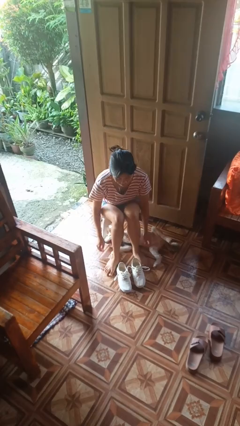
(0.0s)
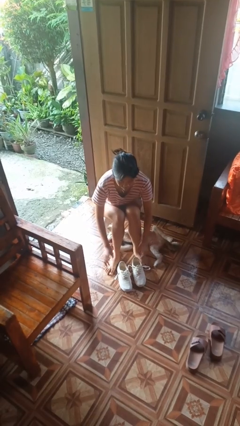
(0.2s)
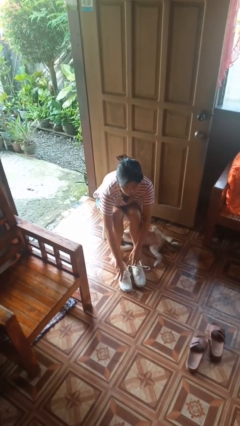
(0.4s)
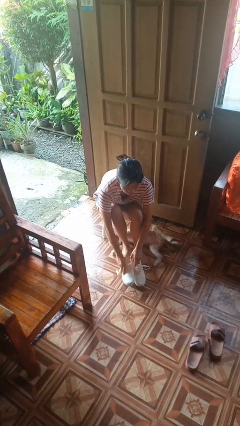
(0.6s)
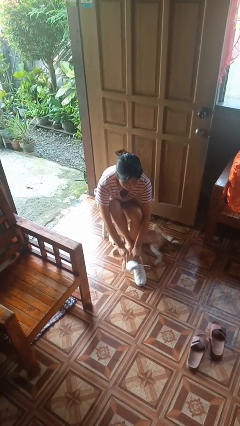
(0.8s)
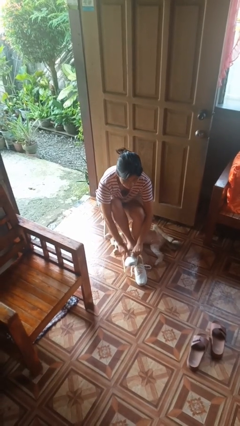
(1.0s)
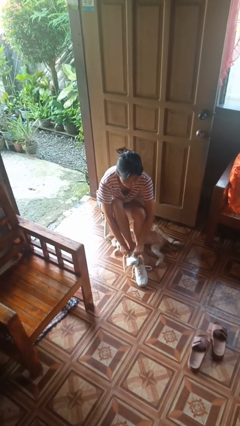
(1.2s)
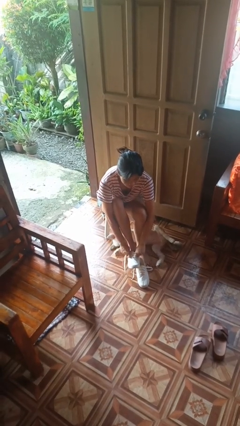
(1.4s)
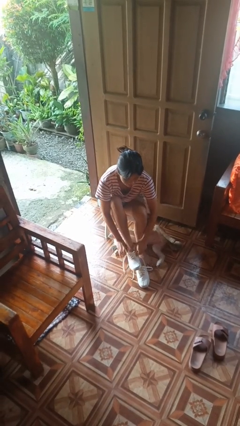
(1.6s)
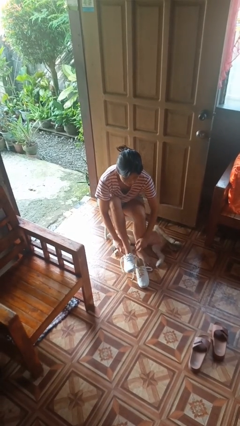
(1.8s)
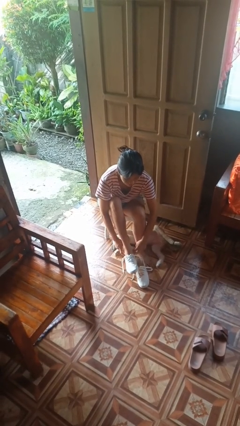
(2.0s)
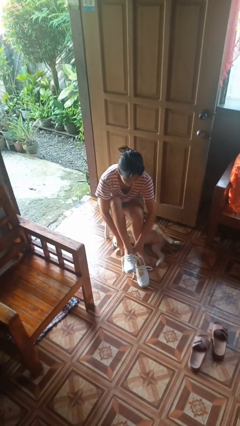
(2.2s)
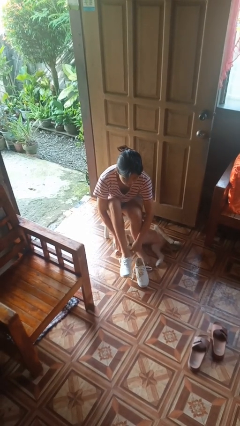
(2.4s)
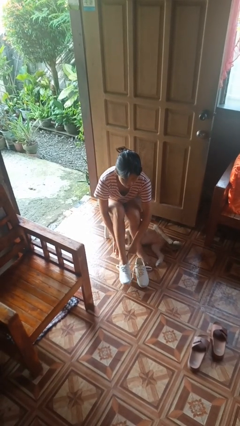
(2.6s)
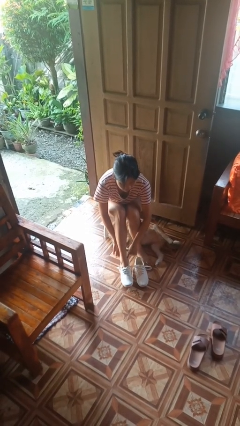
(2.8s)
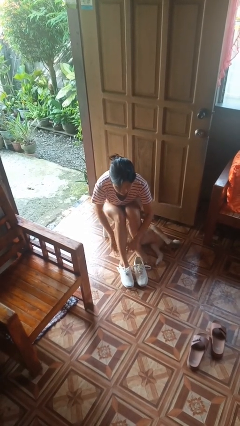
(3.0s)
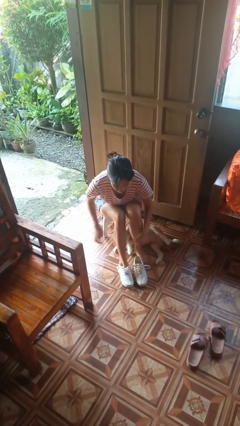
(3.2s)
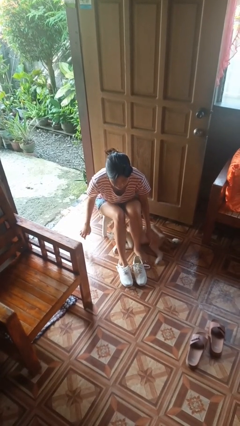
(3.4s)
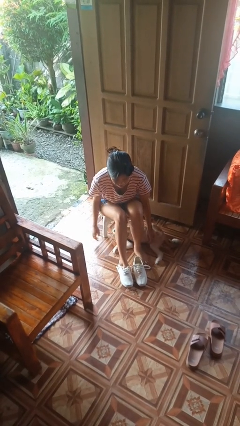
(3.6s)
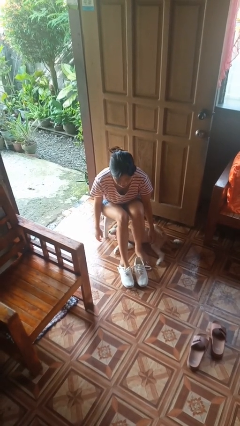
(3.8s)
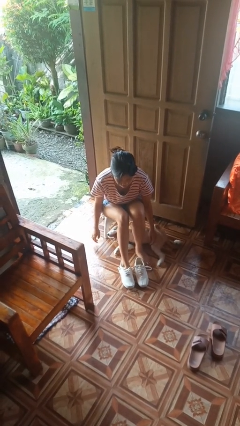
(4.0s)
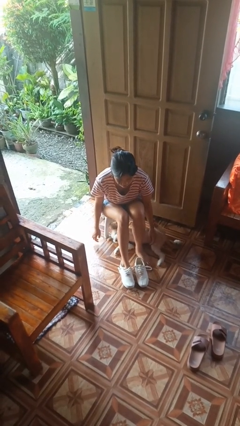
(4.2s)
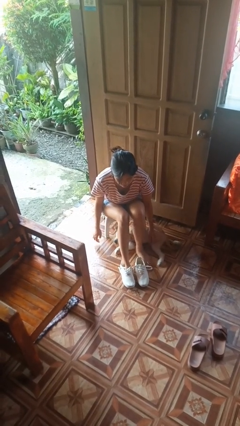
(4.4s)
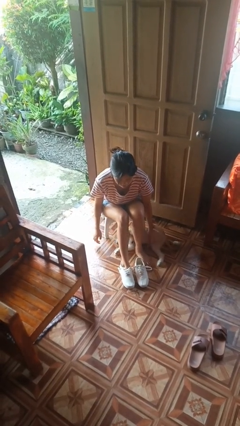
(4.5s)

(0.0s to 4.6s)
person puts on shoes

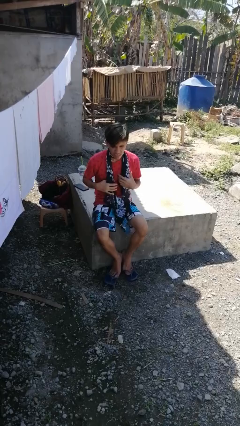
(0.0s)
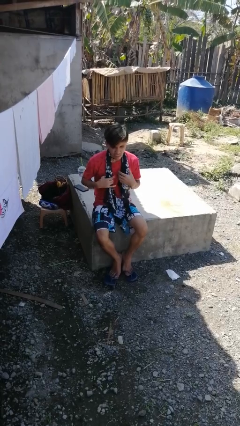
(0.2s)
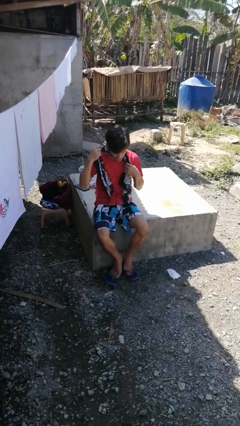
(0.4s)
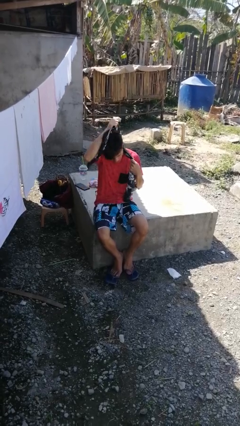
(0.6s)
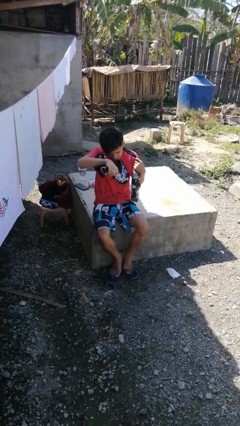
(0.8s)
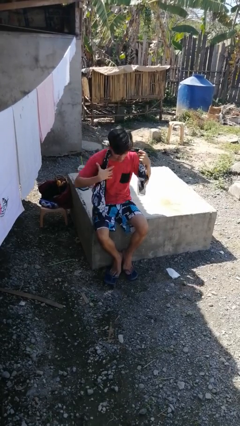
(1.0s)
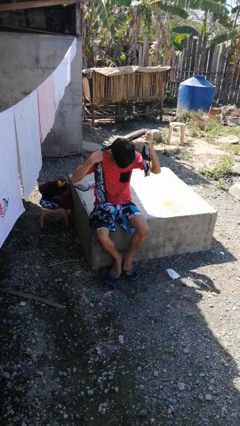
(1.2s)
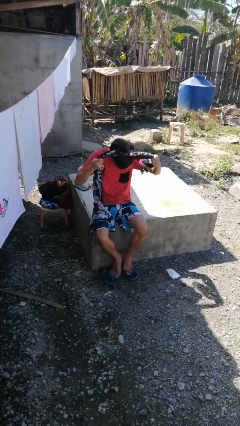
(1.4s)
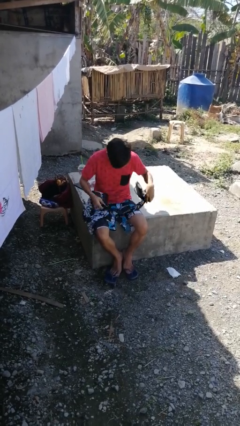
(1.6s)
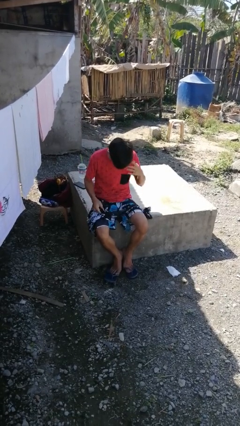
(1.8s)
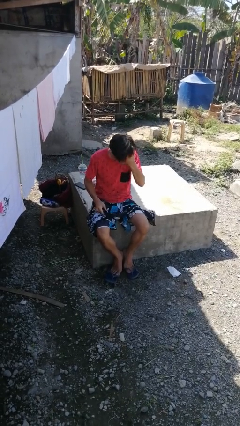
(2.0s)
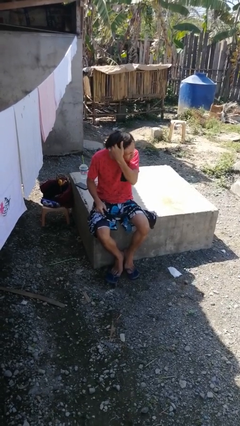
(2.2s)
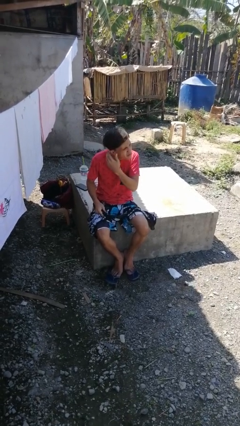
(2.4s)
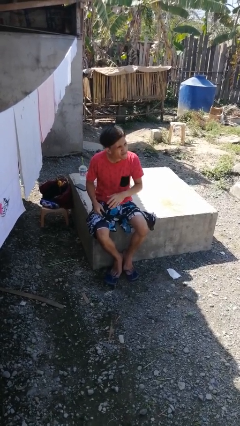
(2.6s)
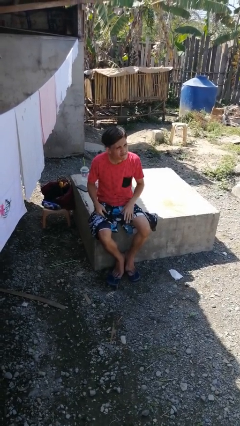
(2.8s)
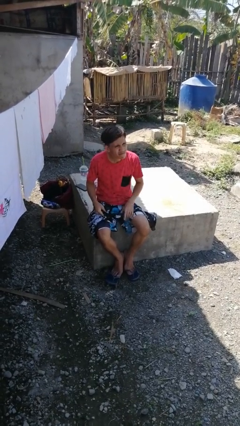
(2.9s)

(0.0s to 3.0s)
person takes off scarf

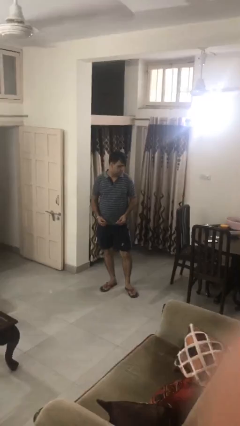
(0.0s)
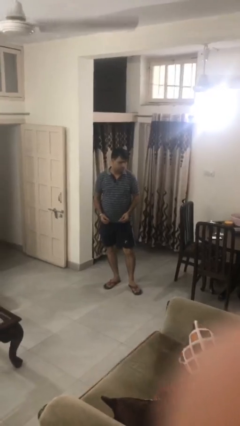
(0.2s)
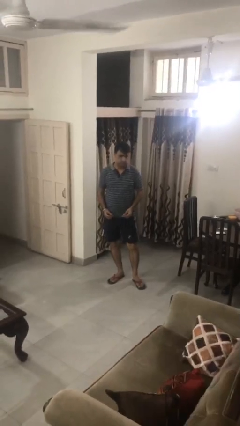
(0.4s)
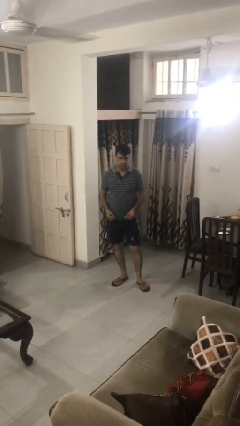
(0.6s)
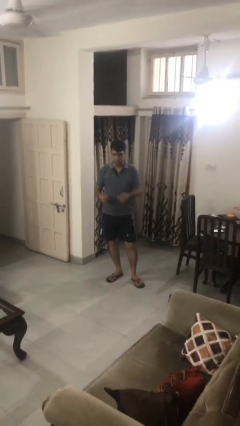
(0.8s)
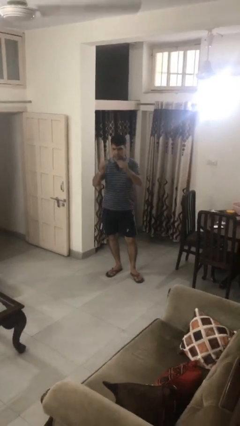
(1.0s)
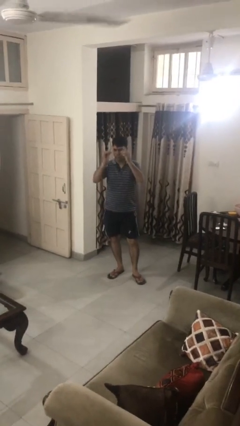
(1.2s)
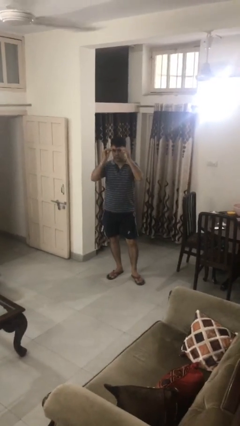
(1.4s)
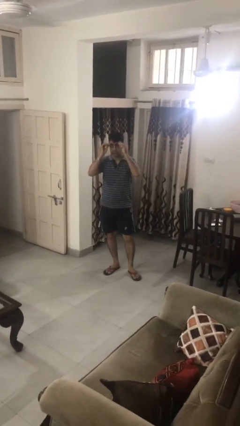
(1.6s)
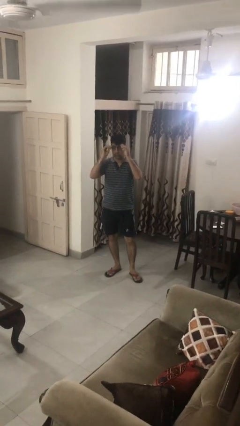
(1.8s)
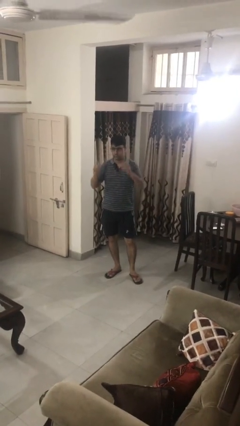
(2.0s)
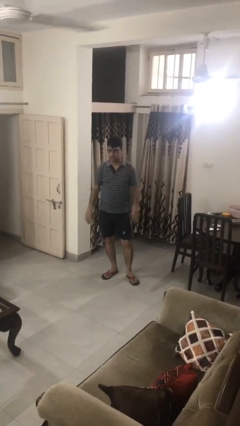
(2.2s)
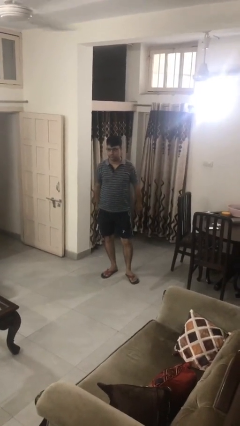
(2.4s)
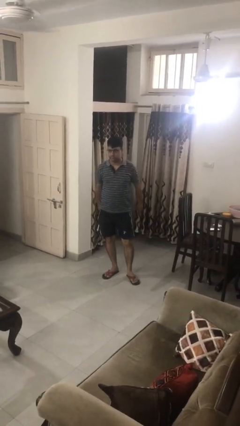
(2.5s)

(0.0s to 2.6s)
person puts on glasses

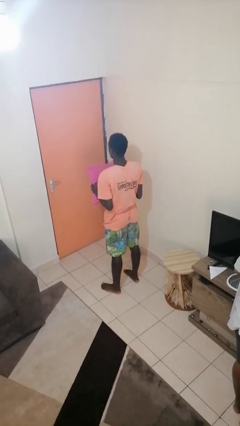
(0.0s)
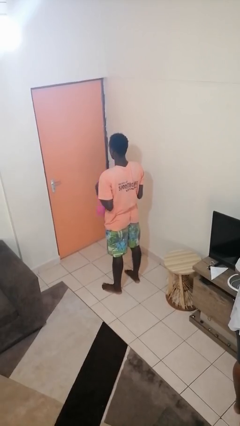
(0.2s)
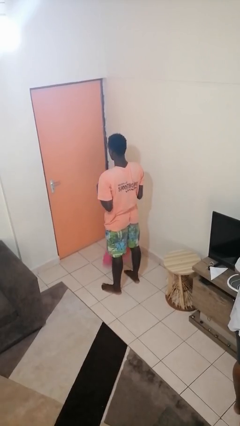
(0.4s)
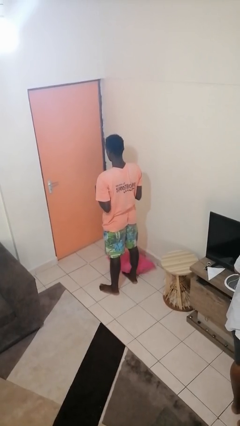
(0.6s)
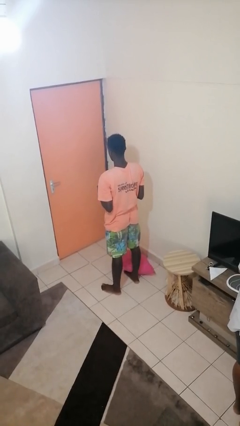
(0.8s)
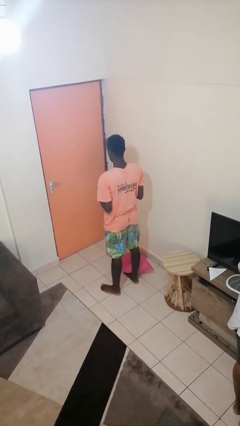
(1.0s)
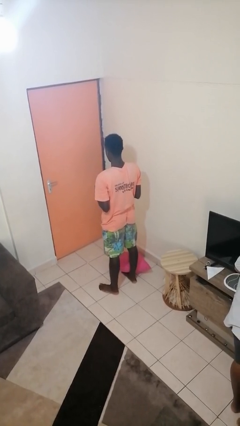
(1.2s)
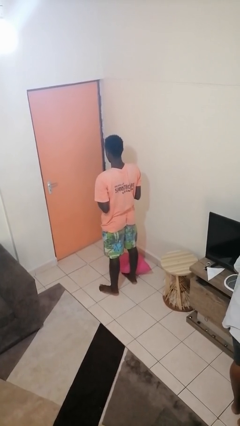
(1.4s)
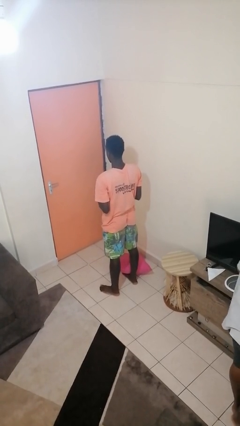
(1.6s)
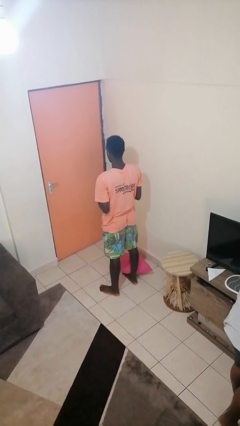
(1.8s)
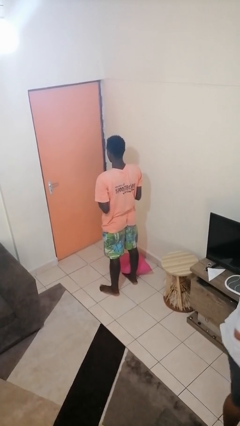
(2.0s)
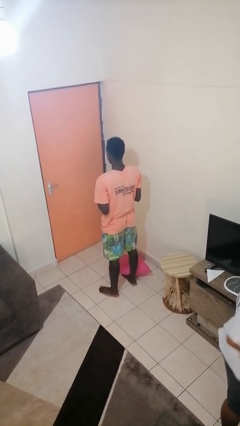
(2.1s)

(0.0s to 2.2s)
person drops object

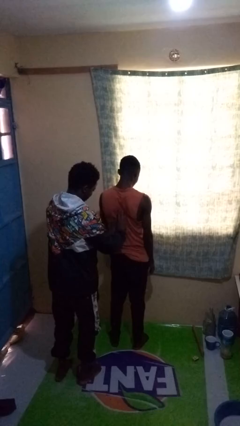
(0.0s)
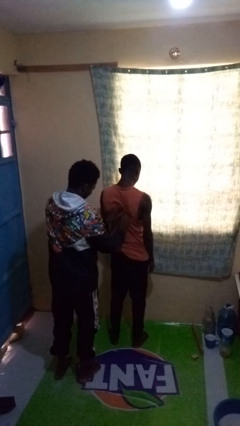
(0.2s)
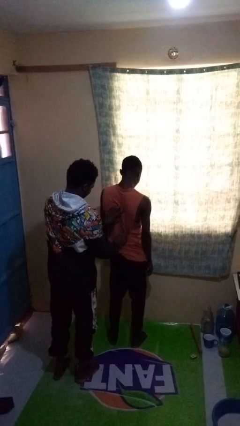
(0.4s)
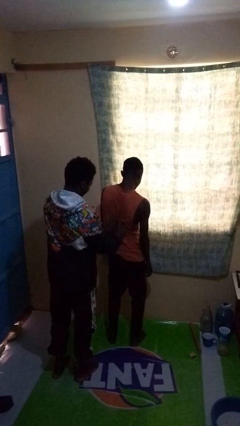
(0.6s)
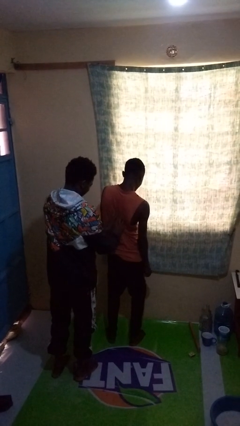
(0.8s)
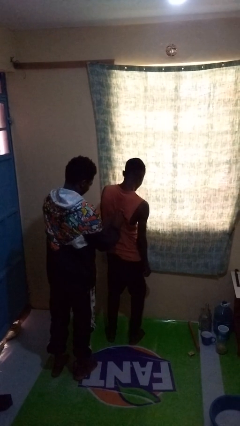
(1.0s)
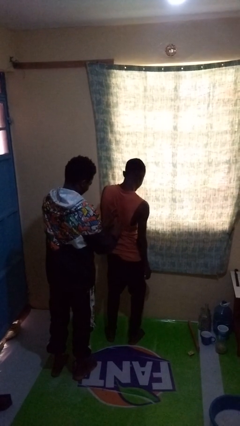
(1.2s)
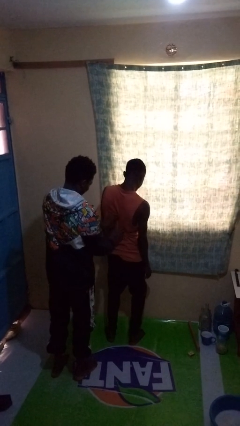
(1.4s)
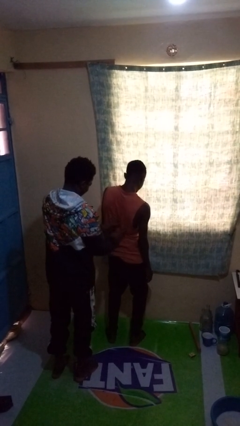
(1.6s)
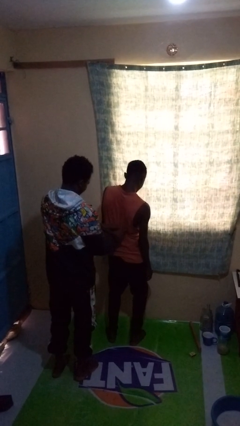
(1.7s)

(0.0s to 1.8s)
person tickles person

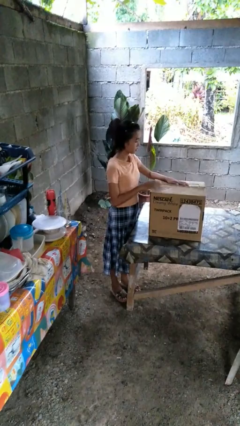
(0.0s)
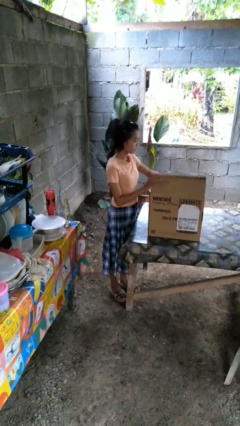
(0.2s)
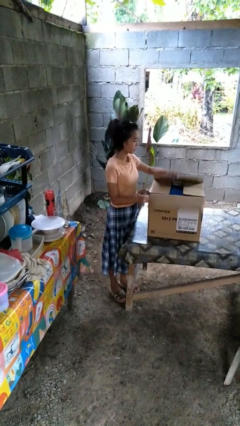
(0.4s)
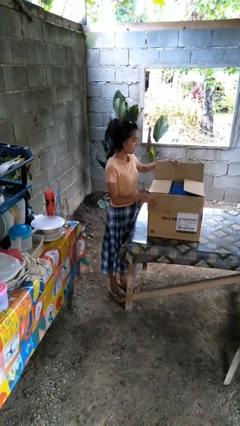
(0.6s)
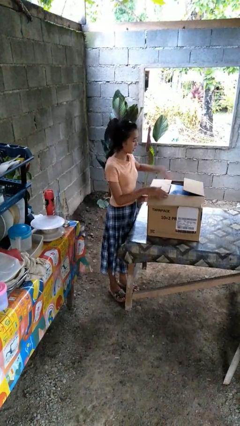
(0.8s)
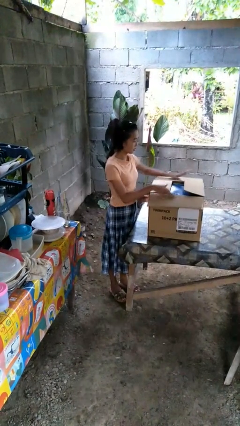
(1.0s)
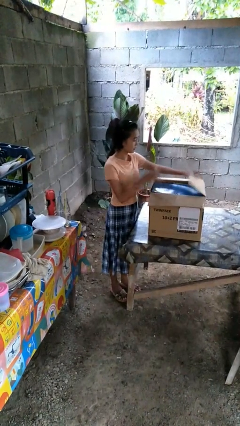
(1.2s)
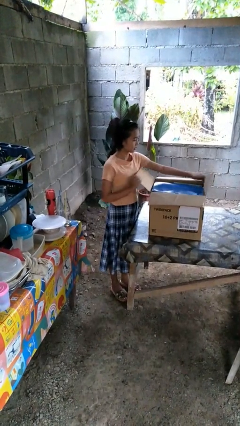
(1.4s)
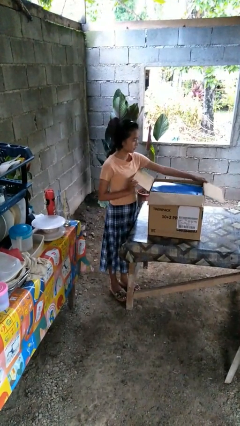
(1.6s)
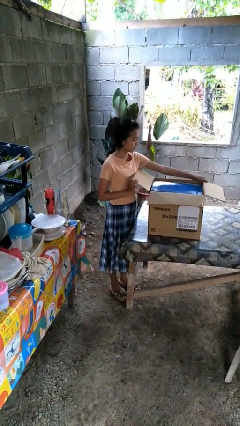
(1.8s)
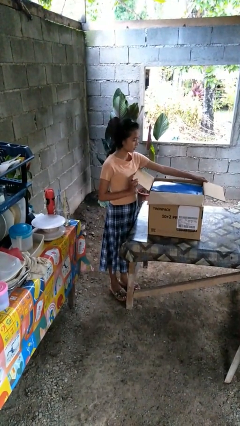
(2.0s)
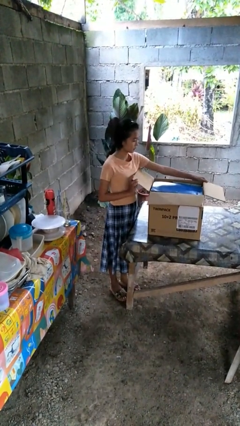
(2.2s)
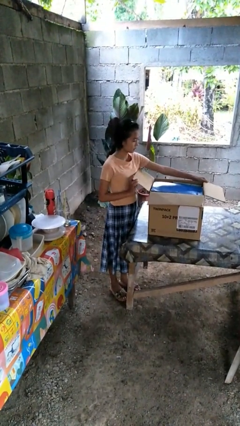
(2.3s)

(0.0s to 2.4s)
person opens box

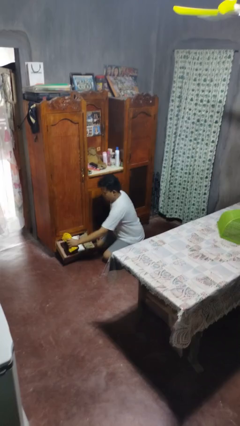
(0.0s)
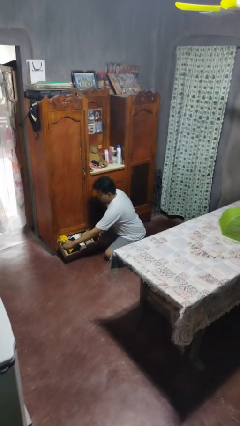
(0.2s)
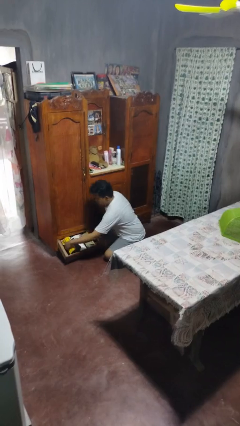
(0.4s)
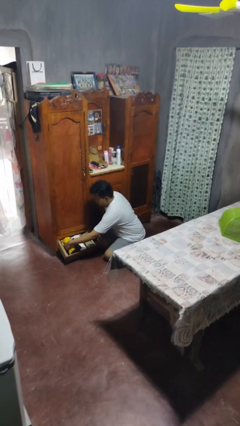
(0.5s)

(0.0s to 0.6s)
person puts clothes into dresser
